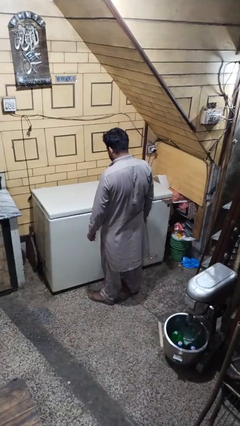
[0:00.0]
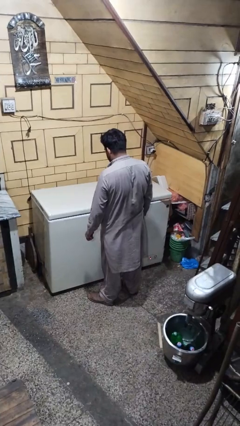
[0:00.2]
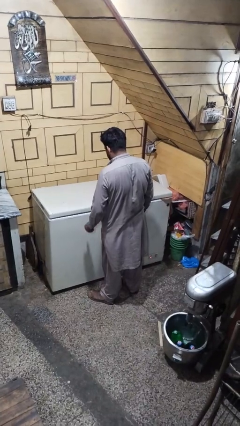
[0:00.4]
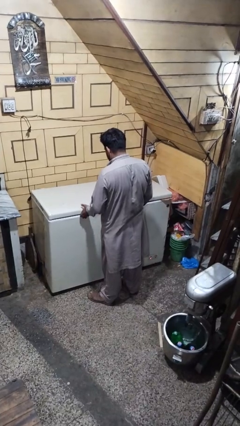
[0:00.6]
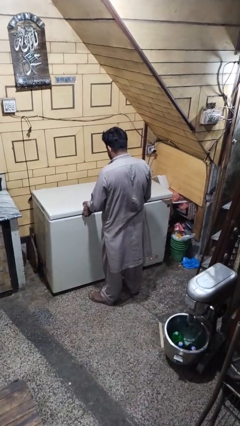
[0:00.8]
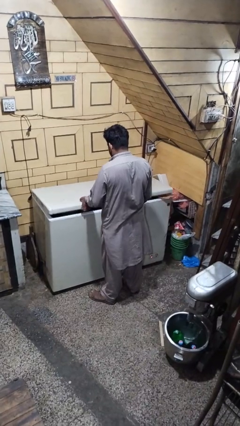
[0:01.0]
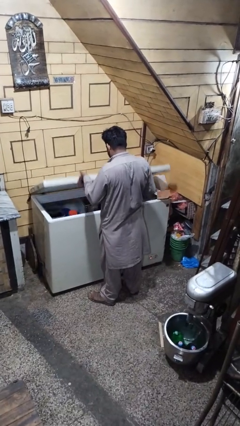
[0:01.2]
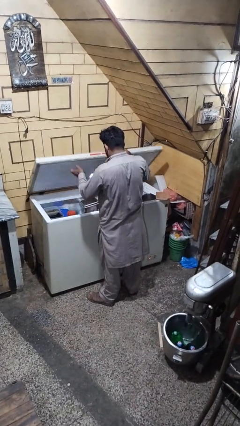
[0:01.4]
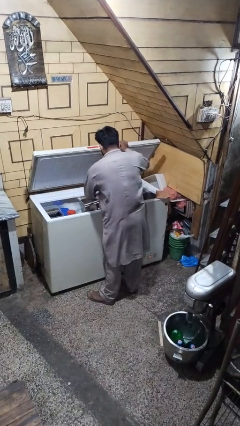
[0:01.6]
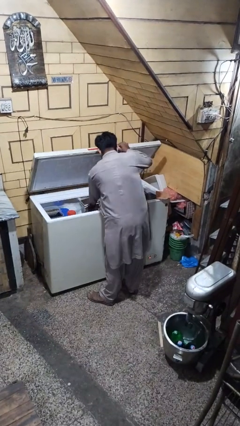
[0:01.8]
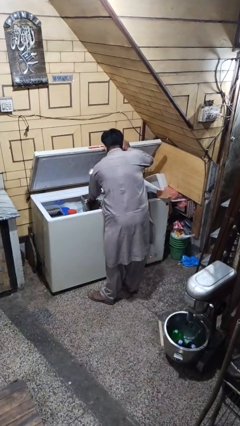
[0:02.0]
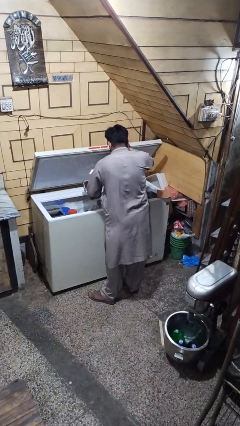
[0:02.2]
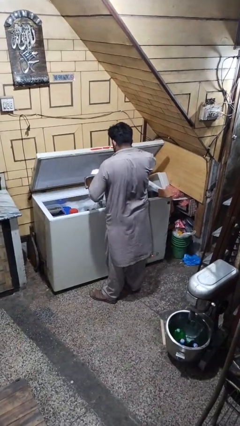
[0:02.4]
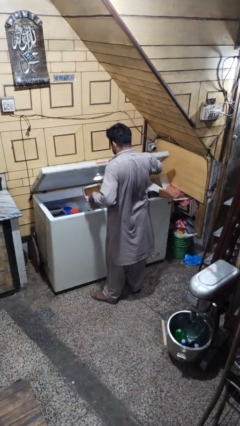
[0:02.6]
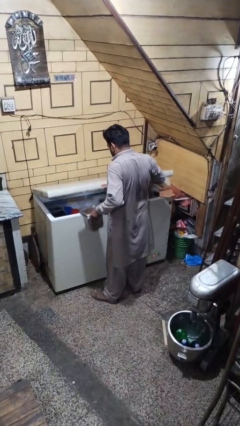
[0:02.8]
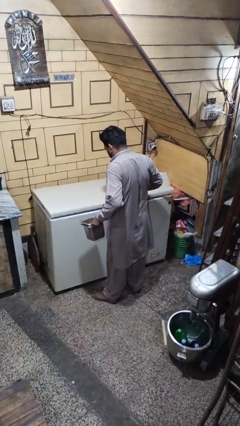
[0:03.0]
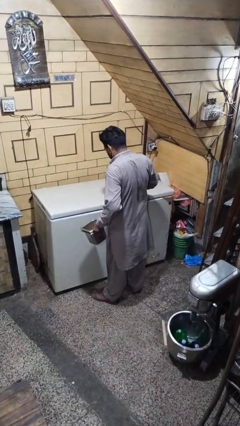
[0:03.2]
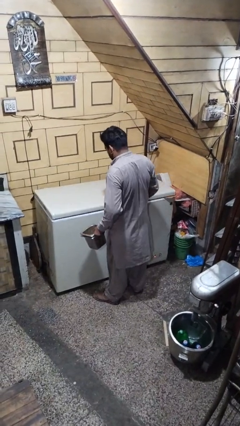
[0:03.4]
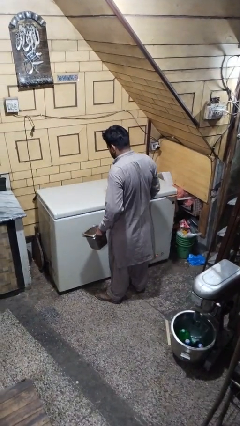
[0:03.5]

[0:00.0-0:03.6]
person takes object from refrigerator

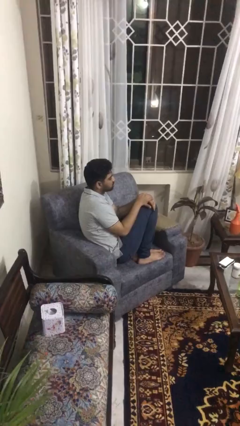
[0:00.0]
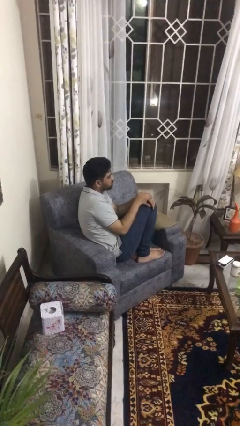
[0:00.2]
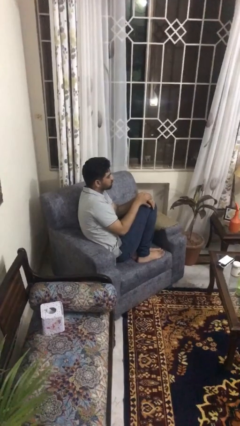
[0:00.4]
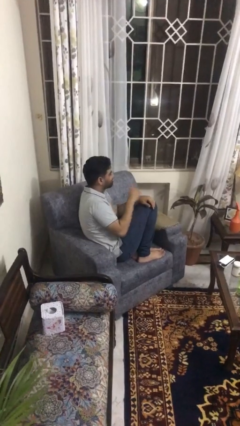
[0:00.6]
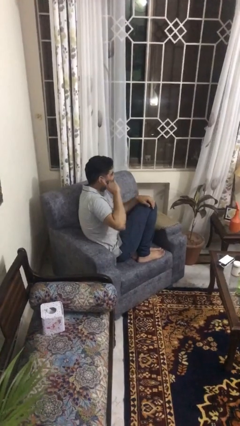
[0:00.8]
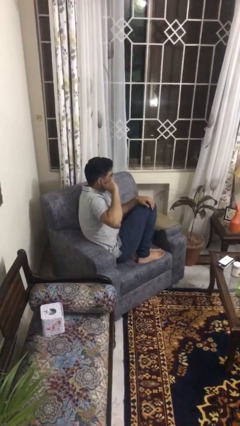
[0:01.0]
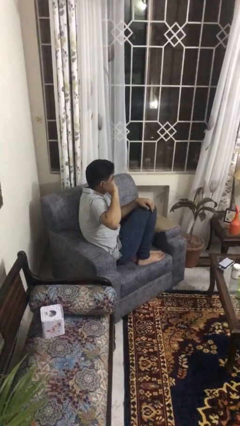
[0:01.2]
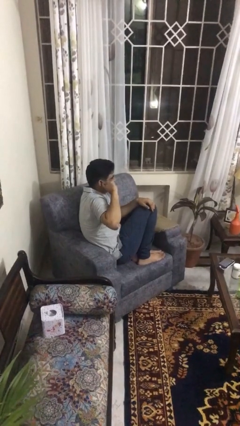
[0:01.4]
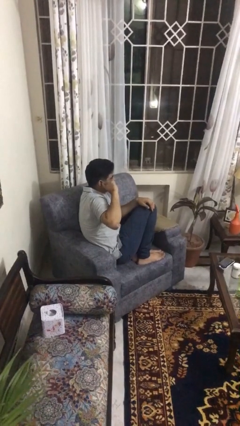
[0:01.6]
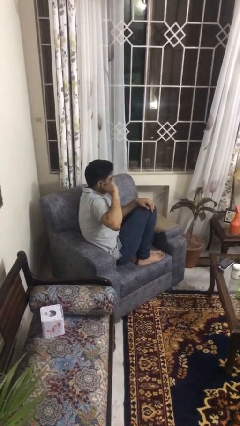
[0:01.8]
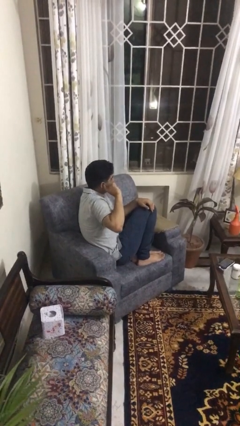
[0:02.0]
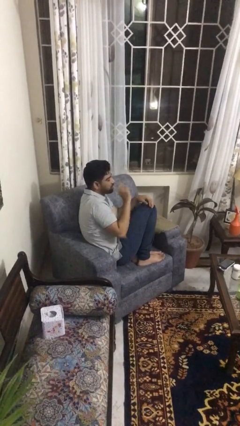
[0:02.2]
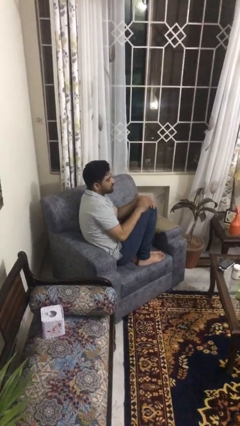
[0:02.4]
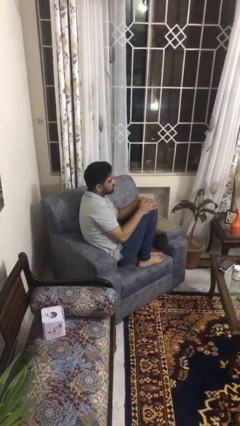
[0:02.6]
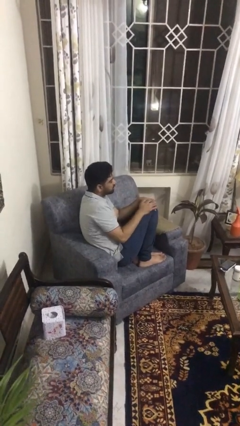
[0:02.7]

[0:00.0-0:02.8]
person puts fingers in ear

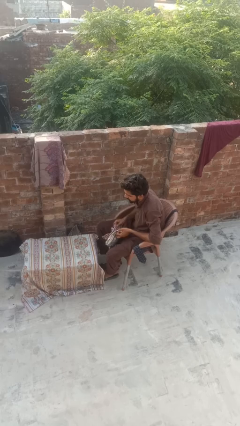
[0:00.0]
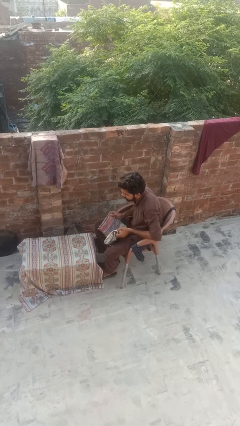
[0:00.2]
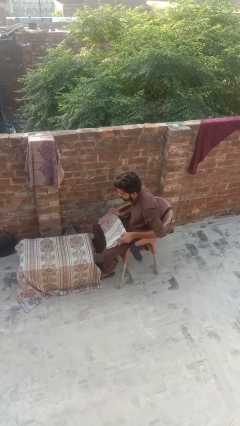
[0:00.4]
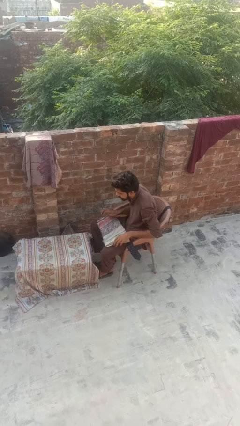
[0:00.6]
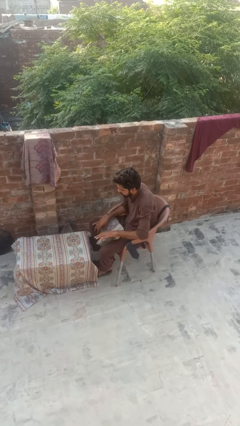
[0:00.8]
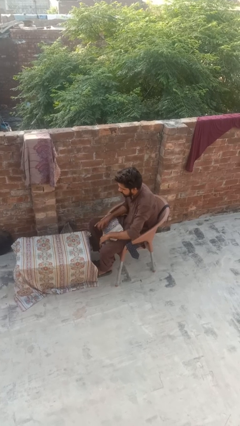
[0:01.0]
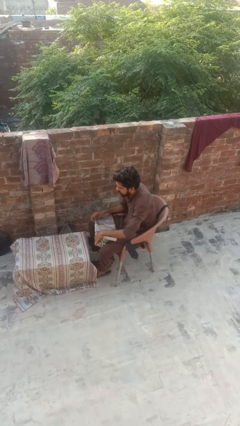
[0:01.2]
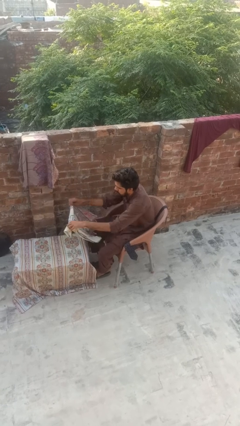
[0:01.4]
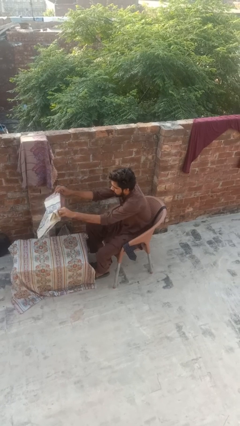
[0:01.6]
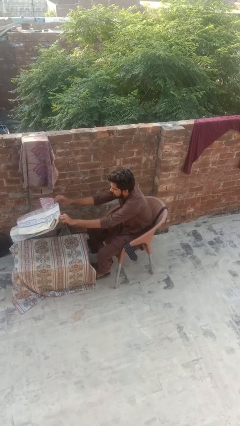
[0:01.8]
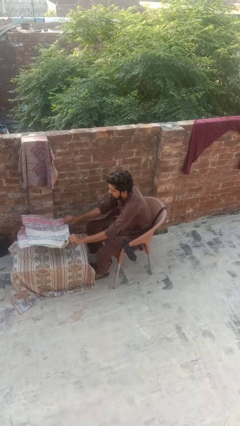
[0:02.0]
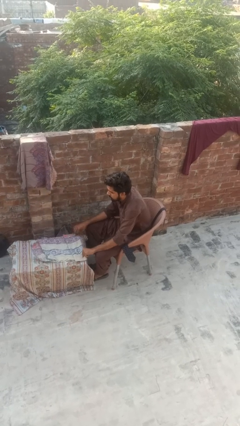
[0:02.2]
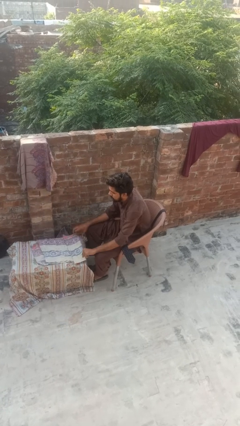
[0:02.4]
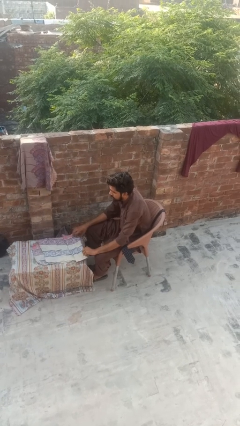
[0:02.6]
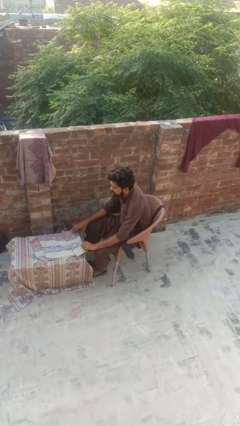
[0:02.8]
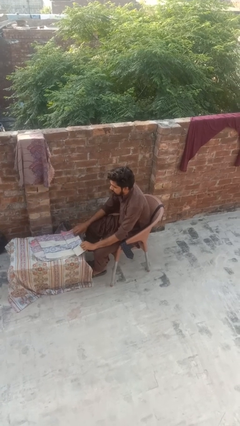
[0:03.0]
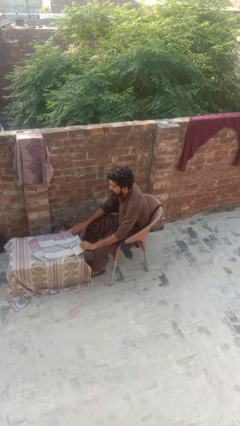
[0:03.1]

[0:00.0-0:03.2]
person spreads tablecloth

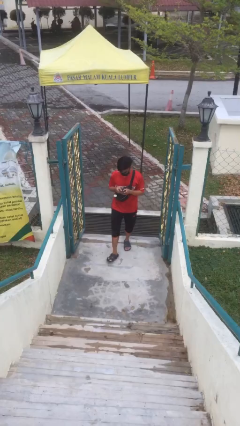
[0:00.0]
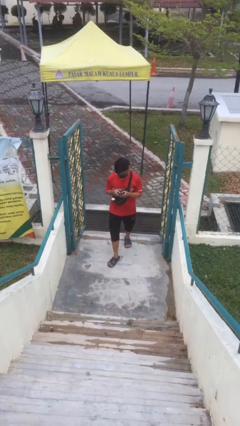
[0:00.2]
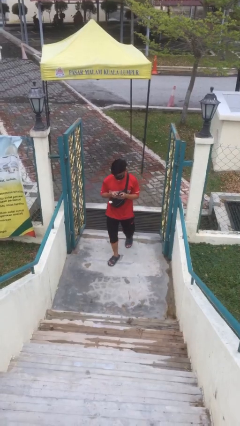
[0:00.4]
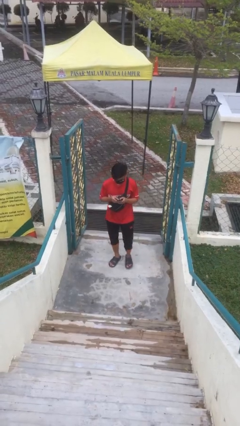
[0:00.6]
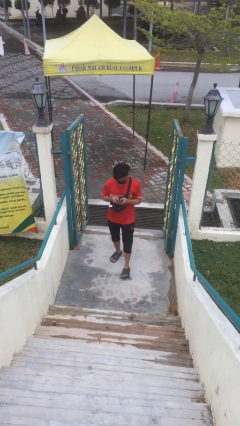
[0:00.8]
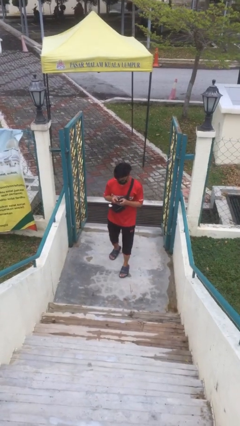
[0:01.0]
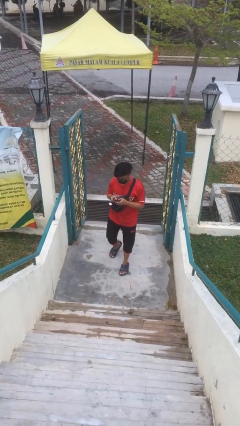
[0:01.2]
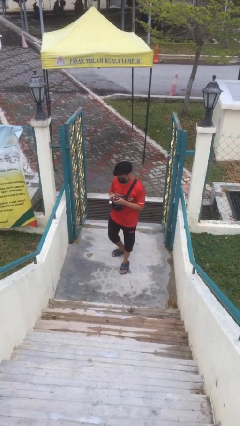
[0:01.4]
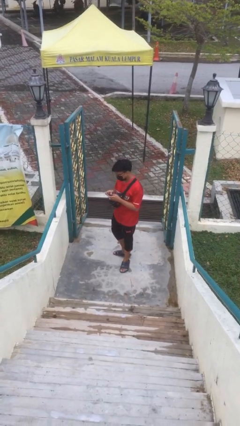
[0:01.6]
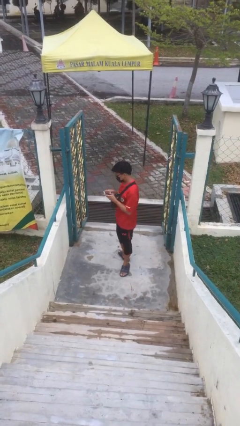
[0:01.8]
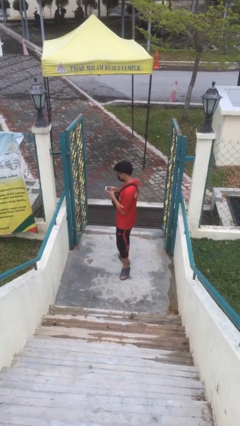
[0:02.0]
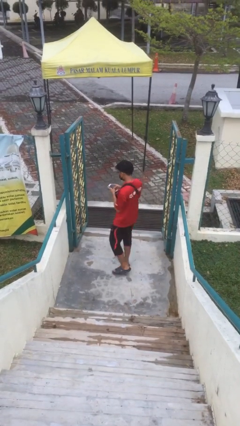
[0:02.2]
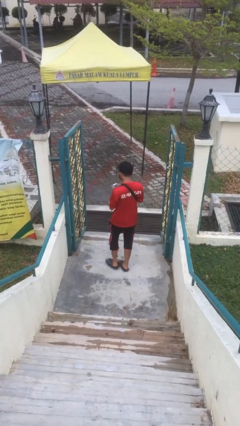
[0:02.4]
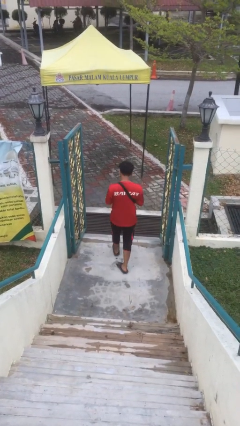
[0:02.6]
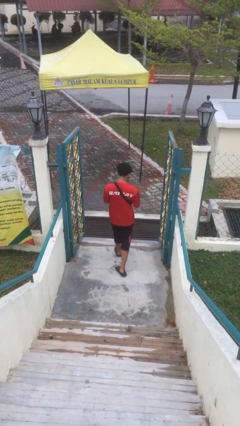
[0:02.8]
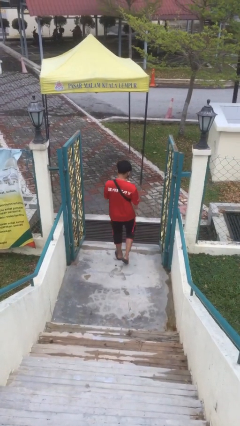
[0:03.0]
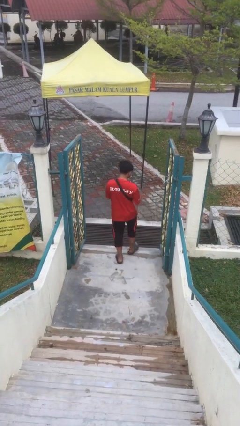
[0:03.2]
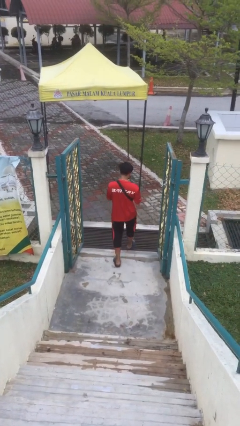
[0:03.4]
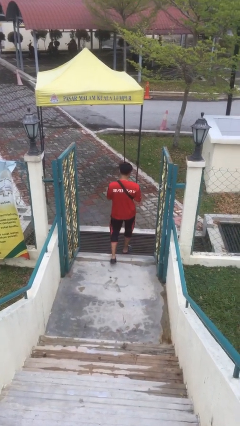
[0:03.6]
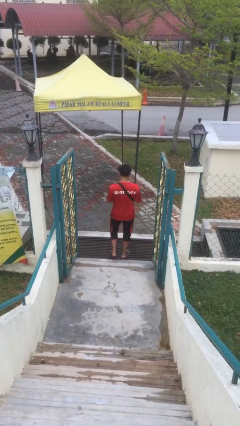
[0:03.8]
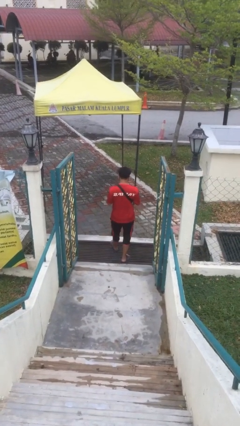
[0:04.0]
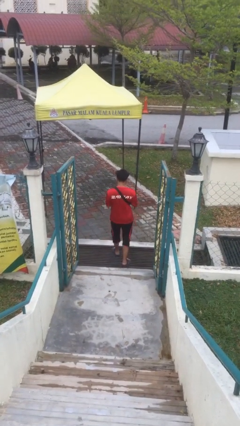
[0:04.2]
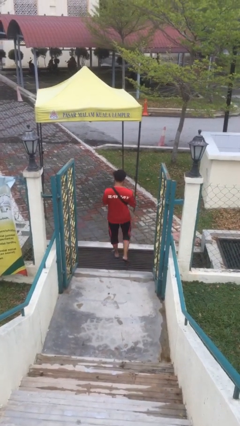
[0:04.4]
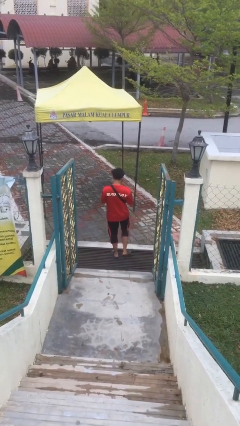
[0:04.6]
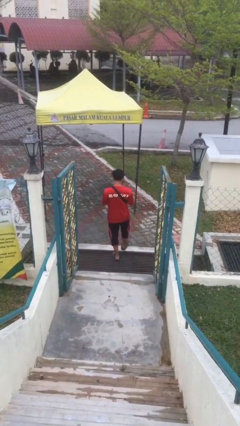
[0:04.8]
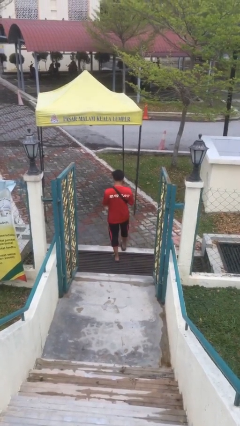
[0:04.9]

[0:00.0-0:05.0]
person exits scene through structure

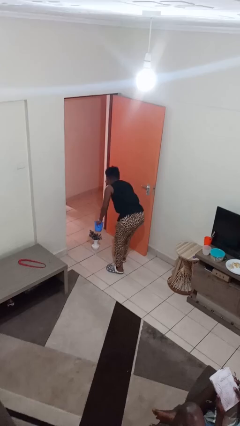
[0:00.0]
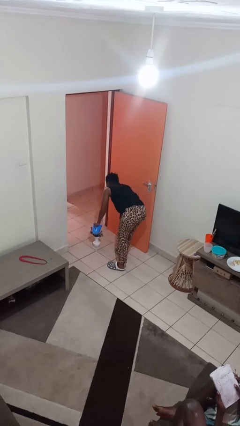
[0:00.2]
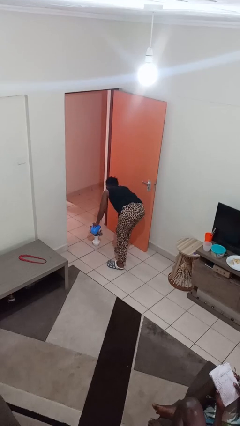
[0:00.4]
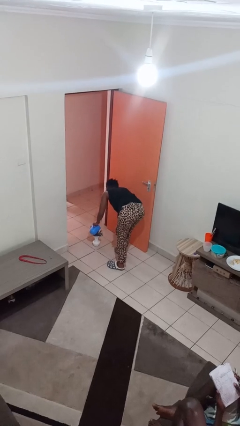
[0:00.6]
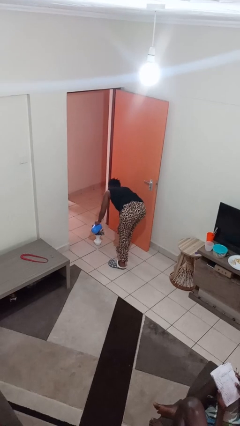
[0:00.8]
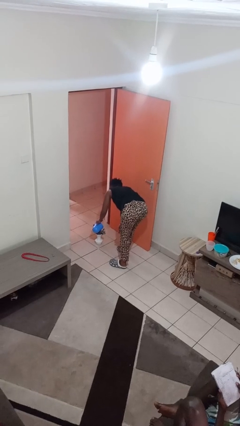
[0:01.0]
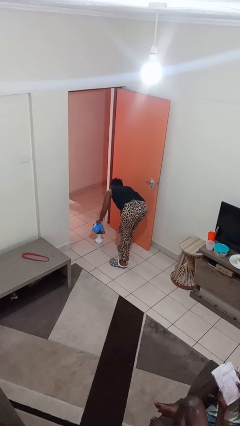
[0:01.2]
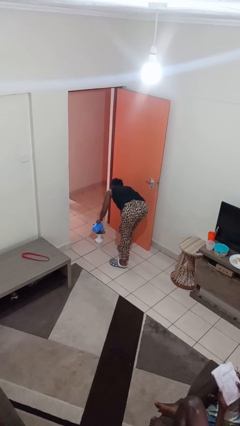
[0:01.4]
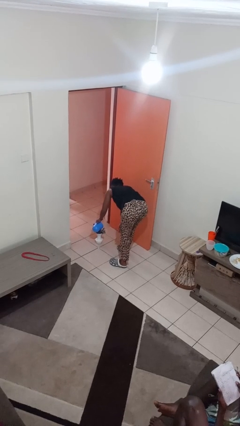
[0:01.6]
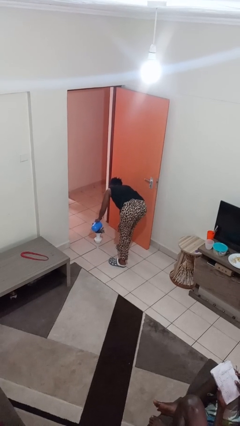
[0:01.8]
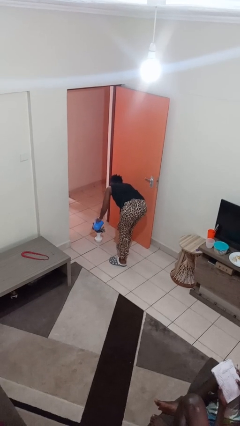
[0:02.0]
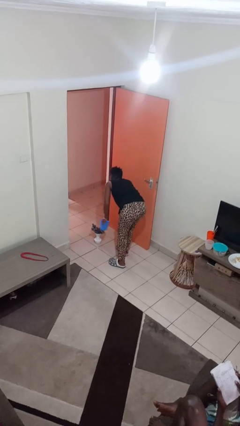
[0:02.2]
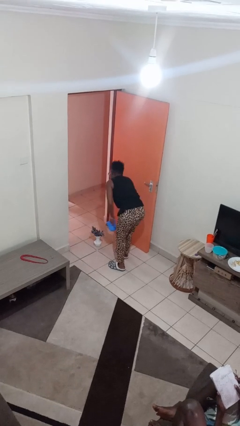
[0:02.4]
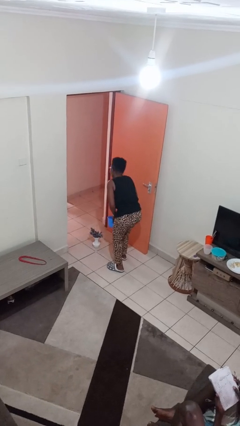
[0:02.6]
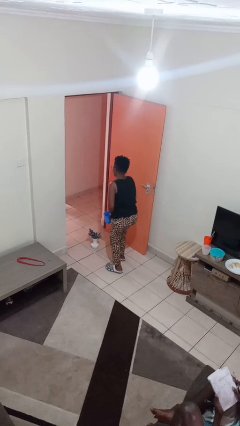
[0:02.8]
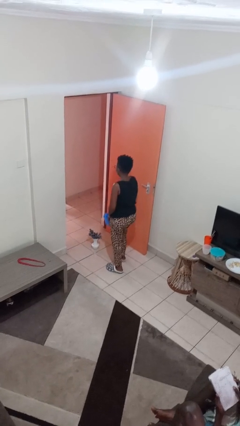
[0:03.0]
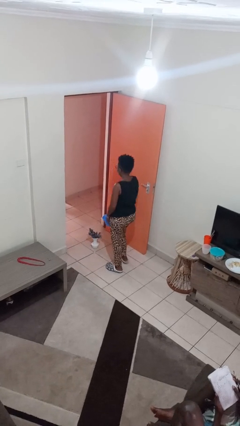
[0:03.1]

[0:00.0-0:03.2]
person waters houseplant
